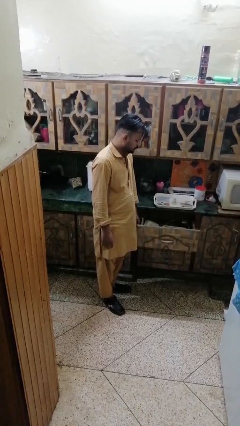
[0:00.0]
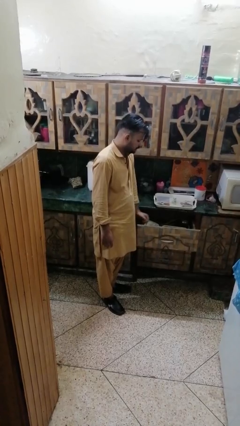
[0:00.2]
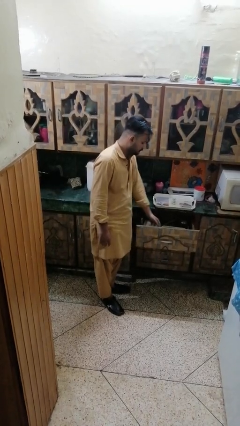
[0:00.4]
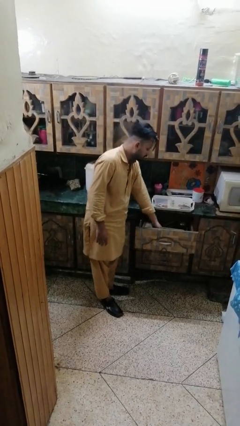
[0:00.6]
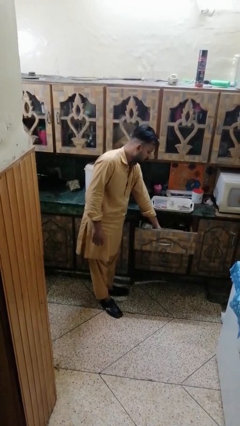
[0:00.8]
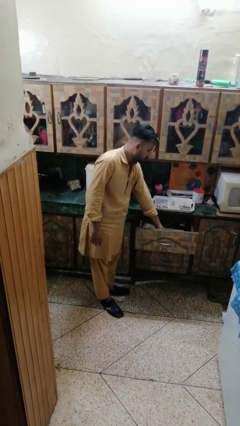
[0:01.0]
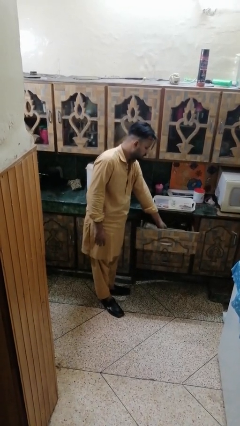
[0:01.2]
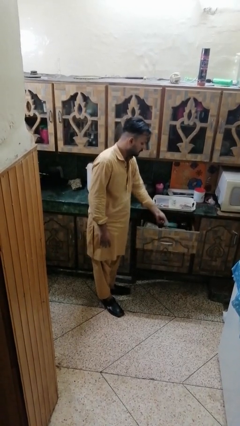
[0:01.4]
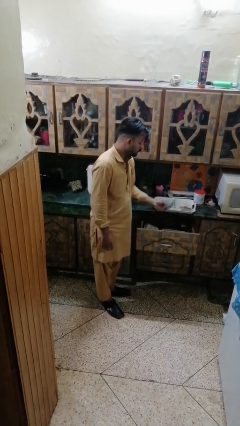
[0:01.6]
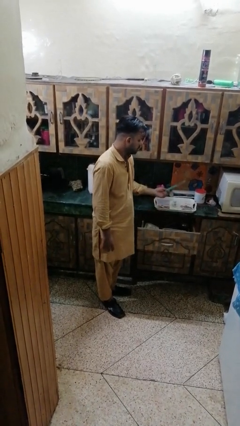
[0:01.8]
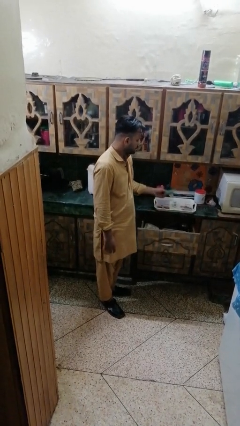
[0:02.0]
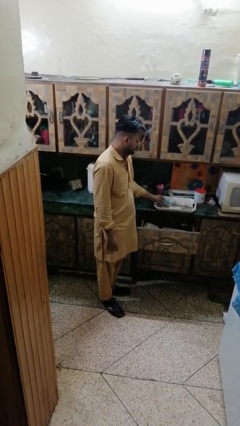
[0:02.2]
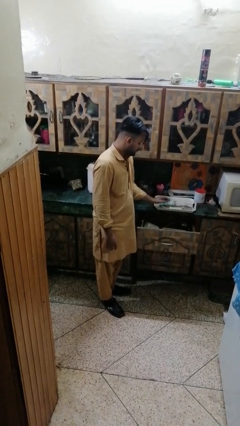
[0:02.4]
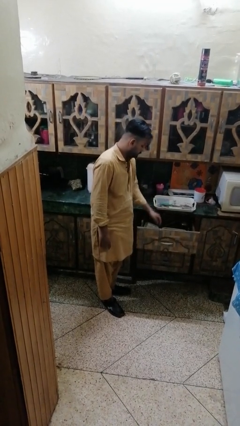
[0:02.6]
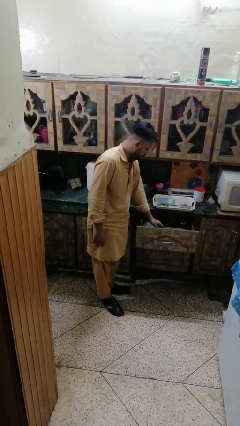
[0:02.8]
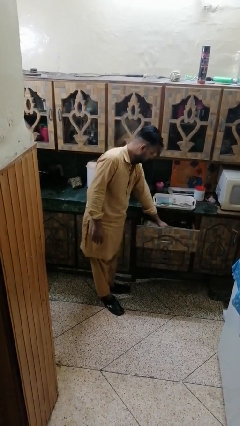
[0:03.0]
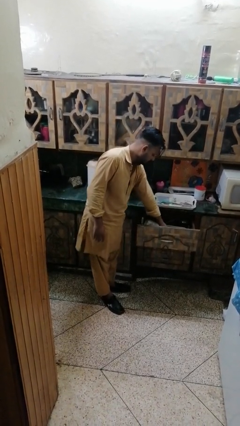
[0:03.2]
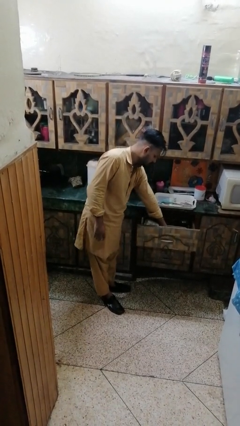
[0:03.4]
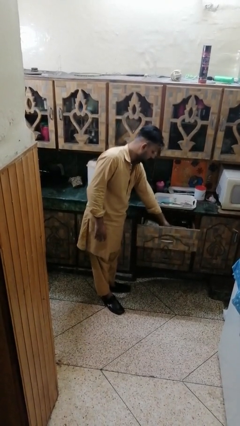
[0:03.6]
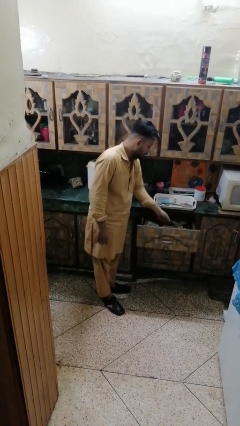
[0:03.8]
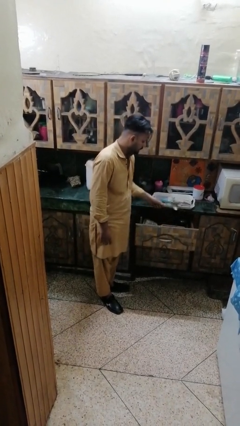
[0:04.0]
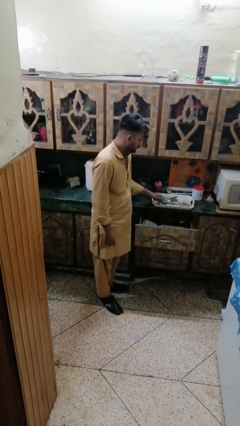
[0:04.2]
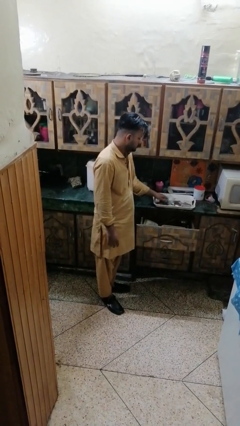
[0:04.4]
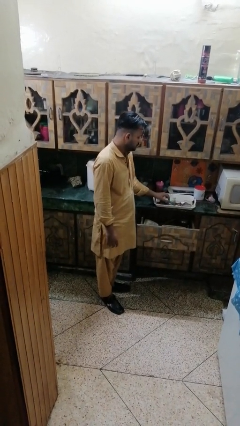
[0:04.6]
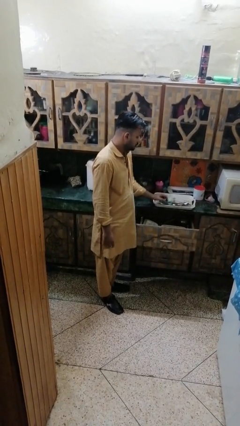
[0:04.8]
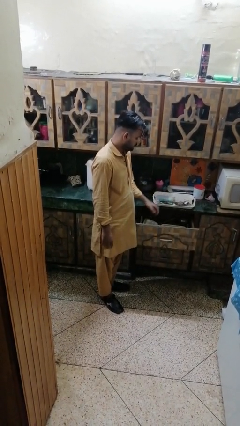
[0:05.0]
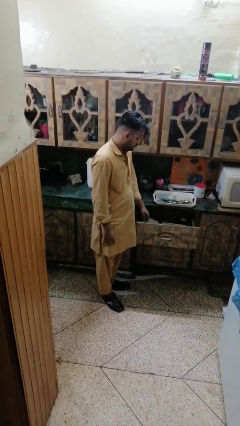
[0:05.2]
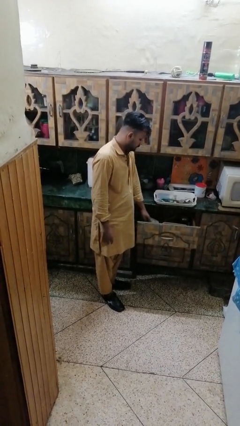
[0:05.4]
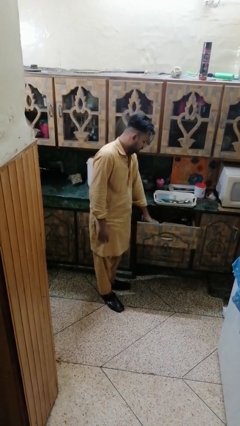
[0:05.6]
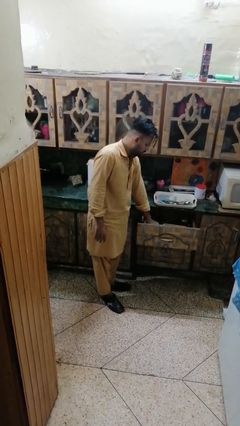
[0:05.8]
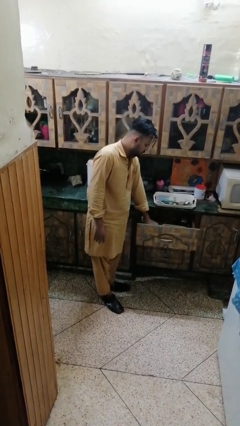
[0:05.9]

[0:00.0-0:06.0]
person takes object from kitchen drawer

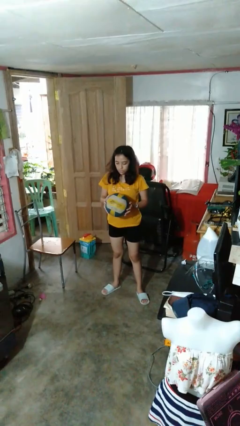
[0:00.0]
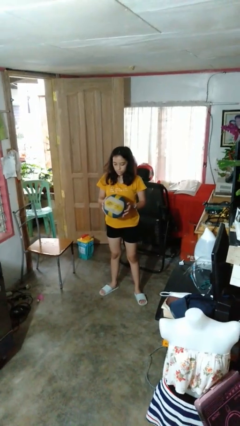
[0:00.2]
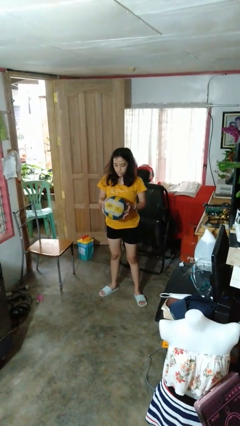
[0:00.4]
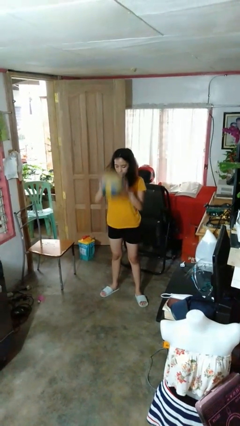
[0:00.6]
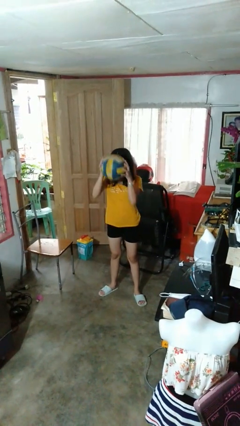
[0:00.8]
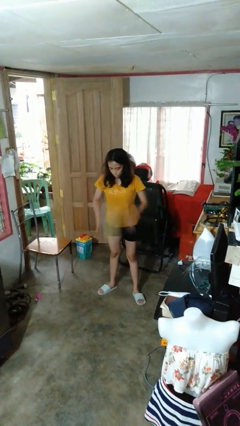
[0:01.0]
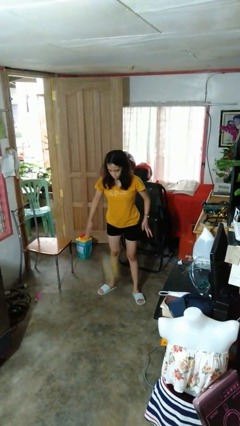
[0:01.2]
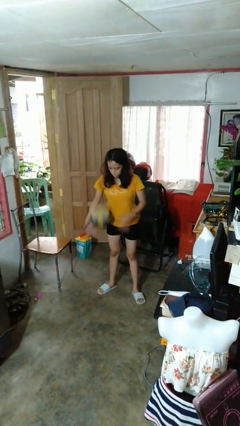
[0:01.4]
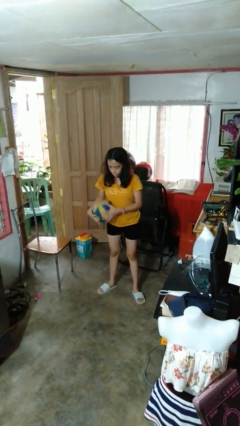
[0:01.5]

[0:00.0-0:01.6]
person bounces ball on floor

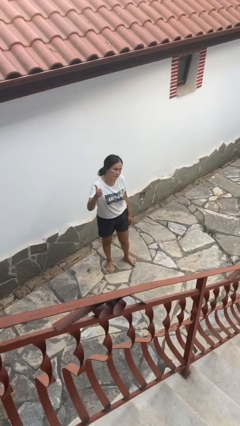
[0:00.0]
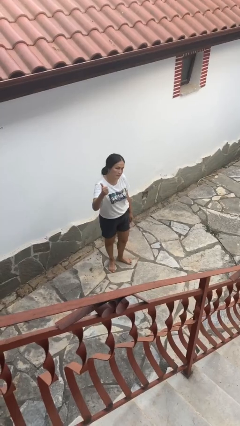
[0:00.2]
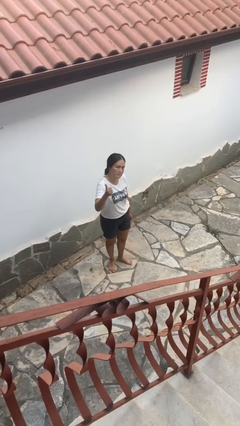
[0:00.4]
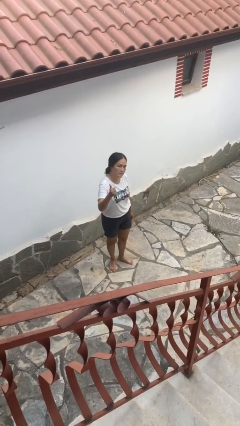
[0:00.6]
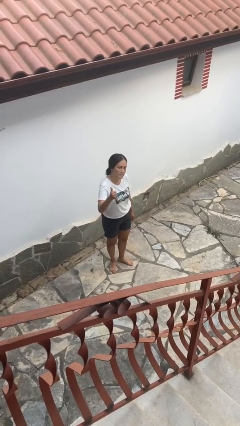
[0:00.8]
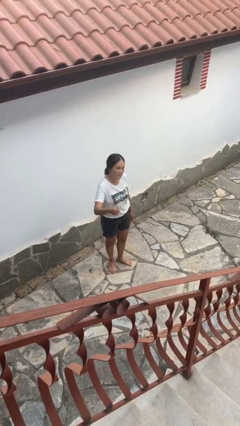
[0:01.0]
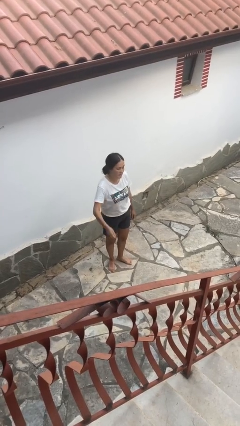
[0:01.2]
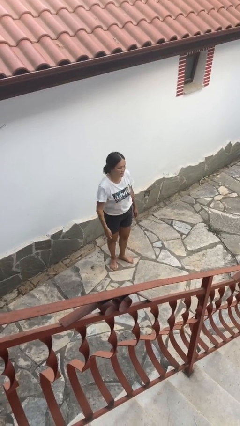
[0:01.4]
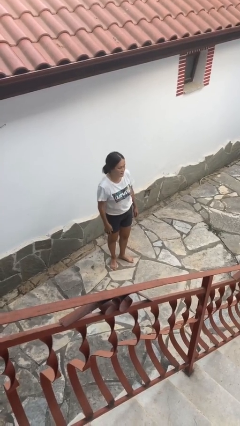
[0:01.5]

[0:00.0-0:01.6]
person gestures thumbs up

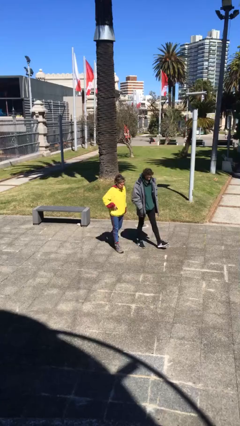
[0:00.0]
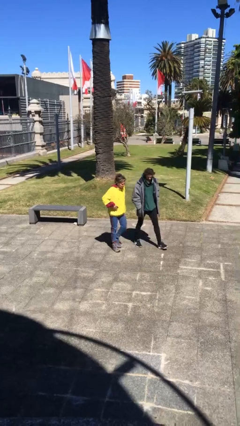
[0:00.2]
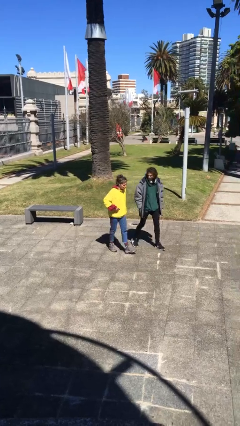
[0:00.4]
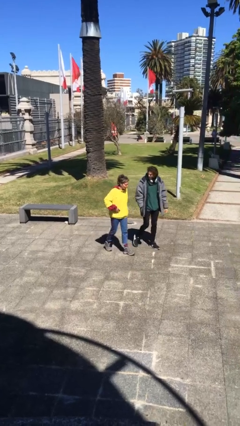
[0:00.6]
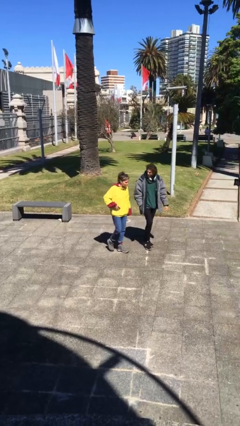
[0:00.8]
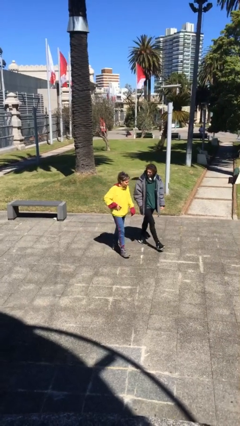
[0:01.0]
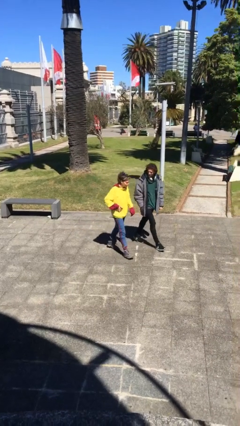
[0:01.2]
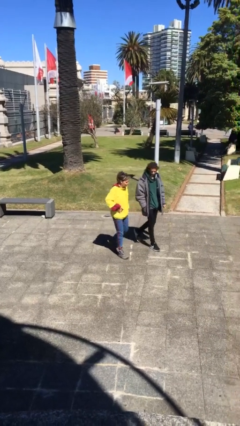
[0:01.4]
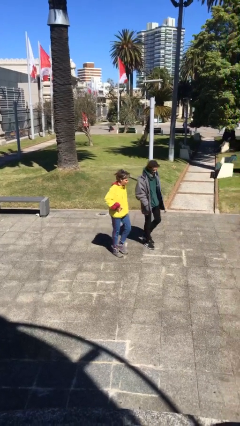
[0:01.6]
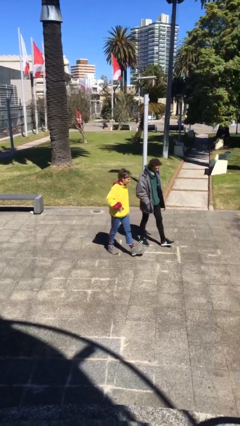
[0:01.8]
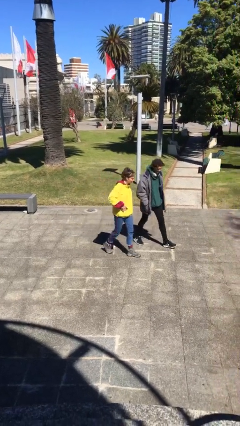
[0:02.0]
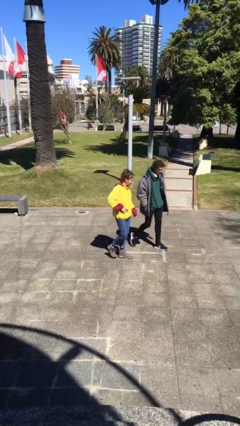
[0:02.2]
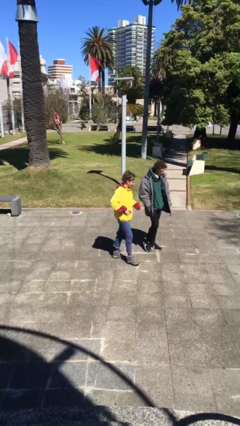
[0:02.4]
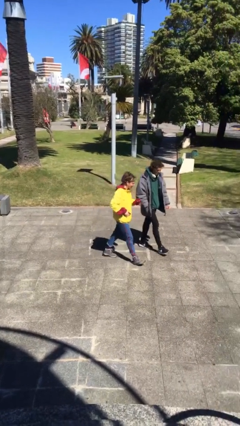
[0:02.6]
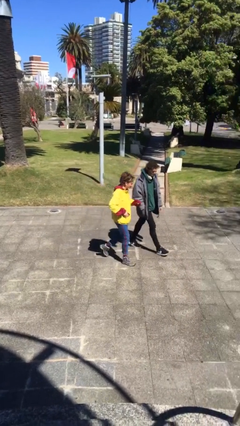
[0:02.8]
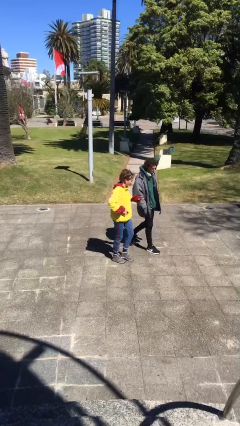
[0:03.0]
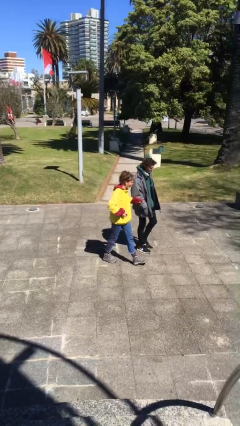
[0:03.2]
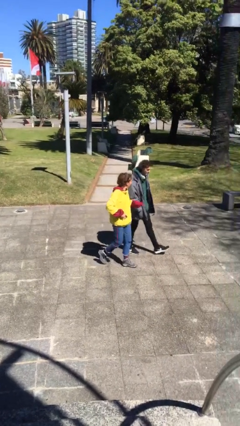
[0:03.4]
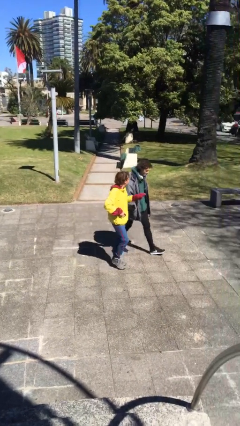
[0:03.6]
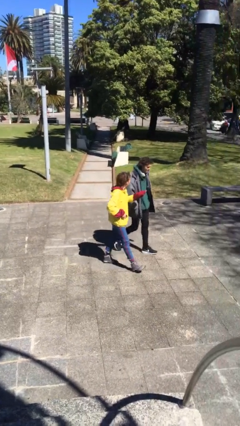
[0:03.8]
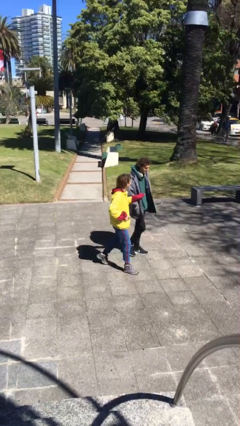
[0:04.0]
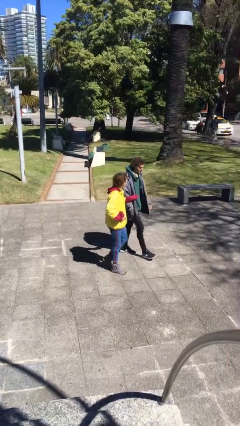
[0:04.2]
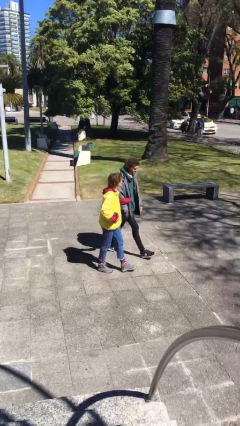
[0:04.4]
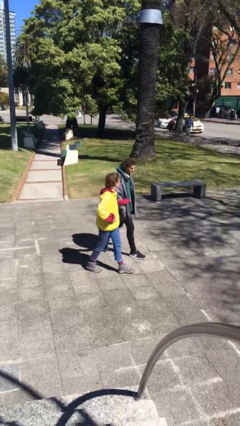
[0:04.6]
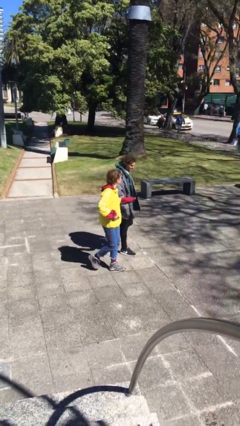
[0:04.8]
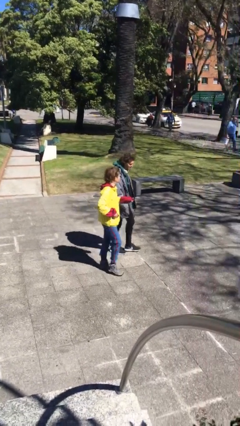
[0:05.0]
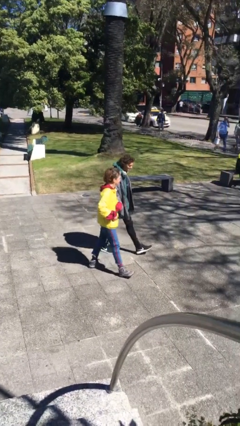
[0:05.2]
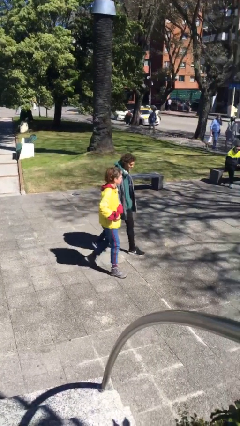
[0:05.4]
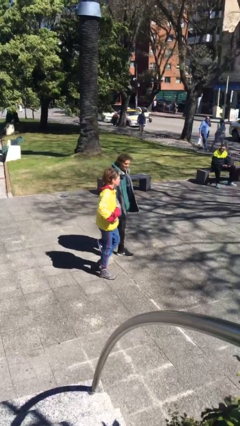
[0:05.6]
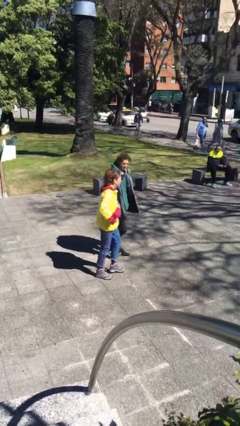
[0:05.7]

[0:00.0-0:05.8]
person talks to person

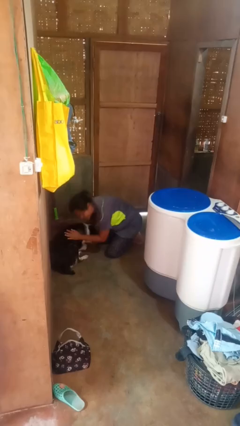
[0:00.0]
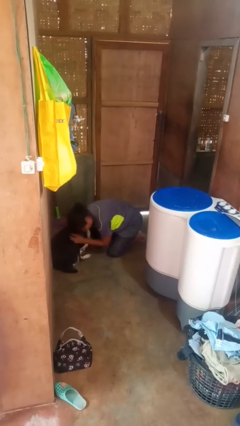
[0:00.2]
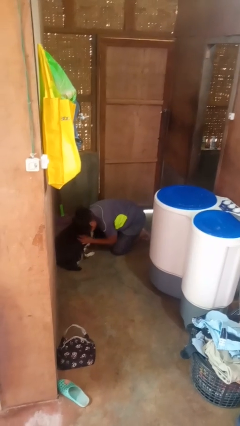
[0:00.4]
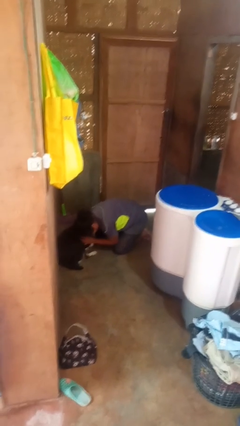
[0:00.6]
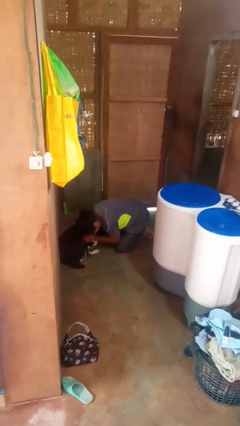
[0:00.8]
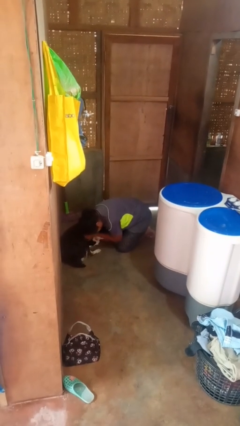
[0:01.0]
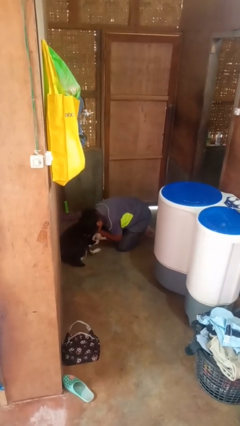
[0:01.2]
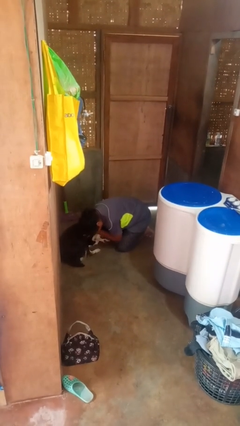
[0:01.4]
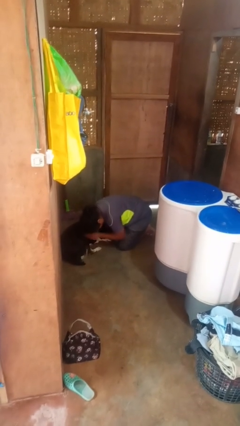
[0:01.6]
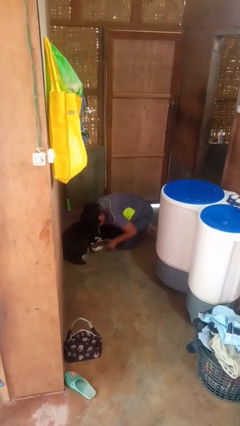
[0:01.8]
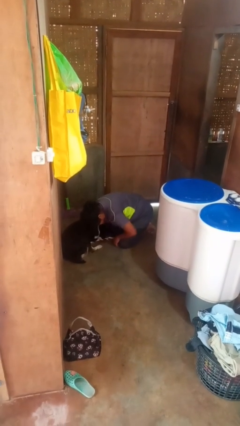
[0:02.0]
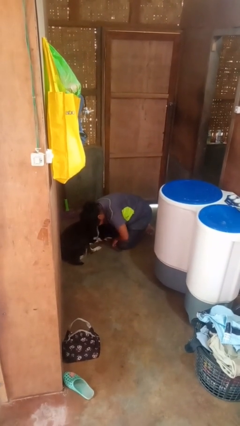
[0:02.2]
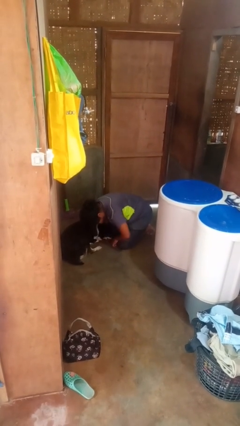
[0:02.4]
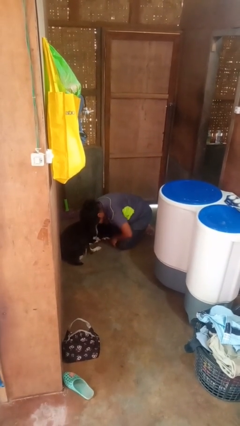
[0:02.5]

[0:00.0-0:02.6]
person hugs cat
